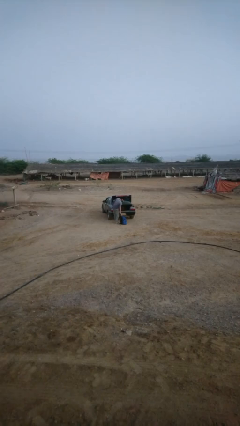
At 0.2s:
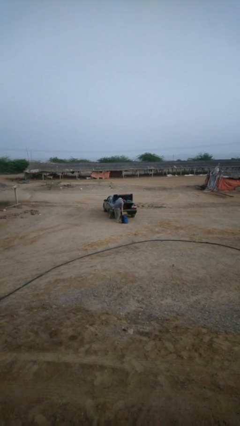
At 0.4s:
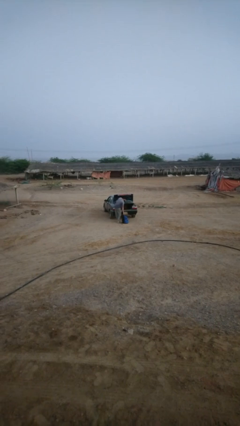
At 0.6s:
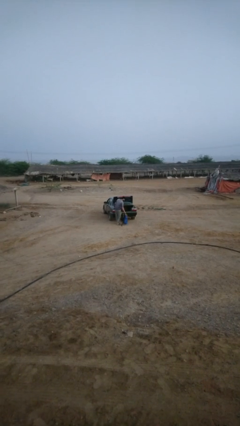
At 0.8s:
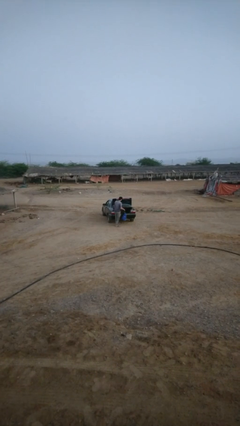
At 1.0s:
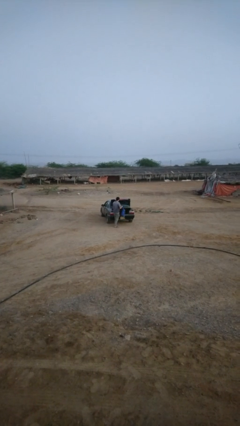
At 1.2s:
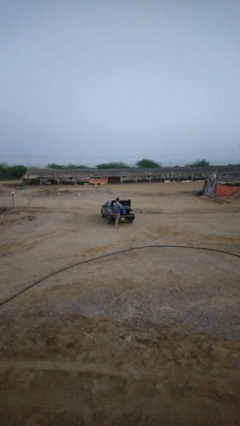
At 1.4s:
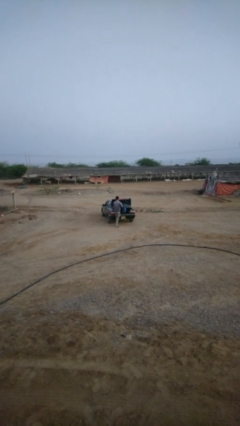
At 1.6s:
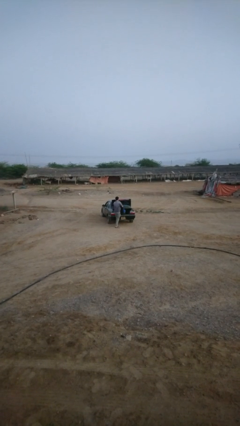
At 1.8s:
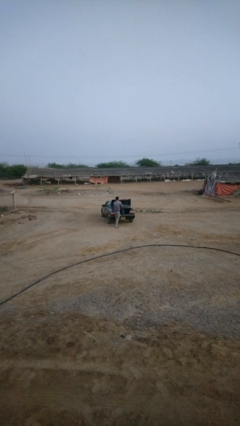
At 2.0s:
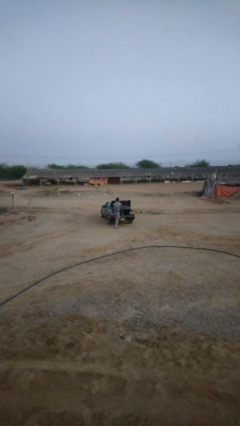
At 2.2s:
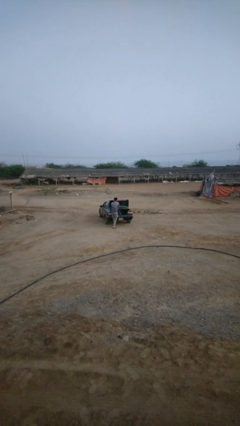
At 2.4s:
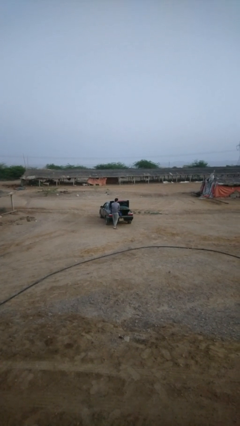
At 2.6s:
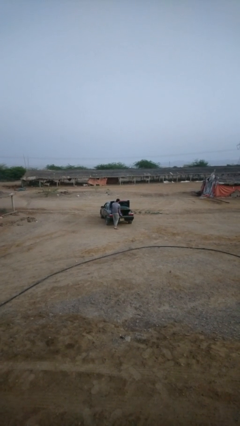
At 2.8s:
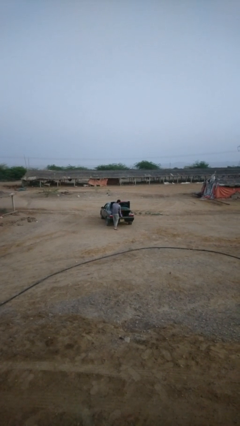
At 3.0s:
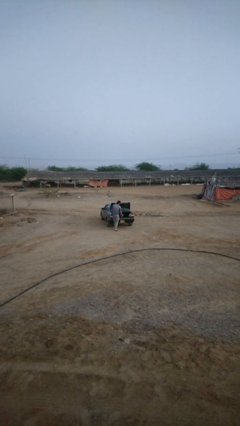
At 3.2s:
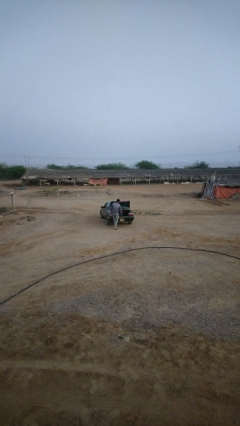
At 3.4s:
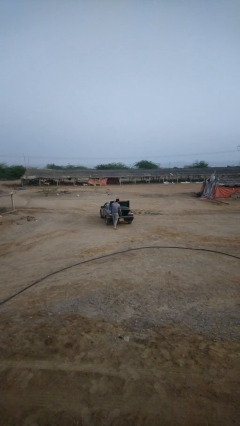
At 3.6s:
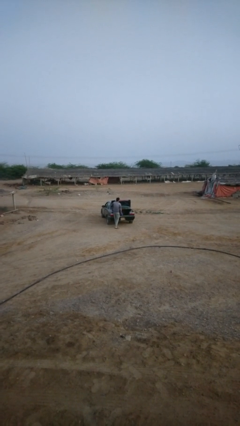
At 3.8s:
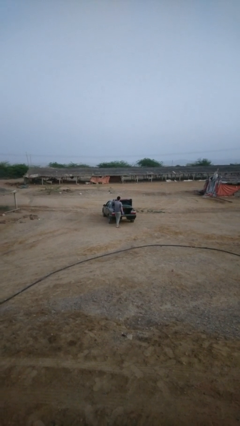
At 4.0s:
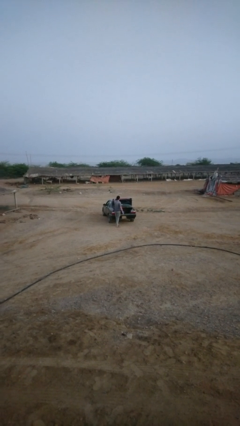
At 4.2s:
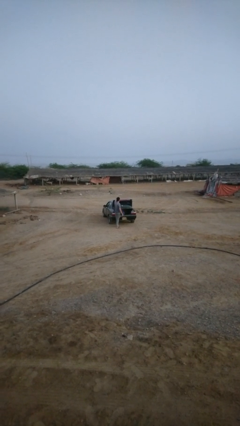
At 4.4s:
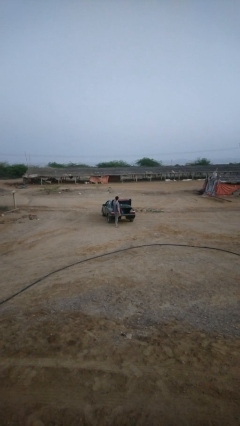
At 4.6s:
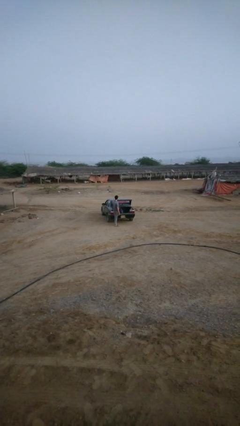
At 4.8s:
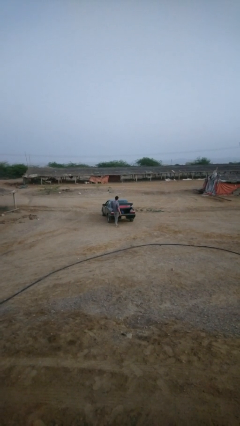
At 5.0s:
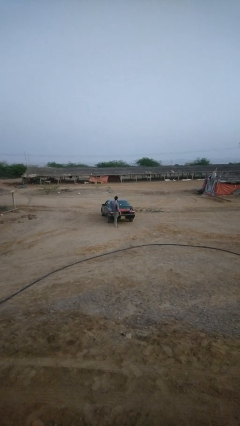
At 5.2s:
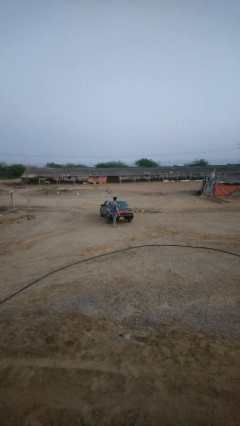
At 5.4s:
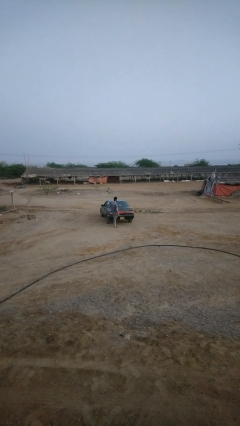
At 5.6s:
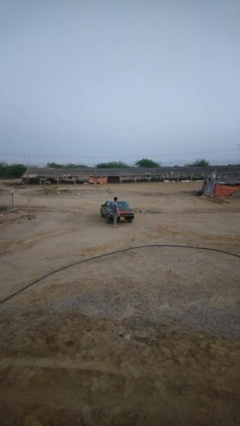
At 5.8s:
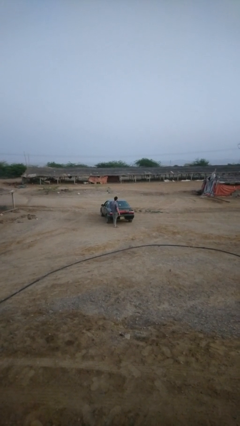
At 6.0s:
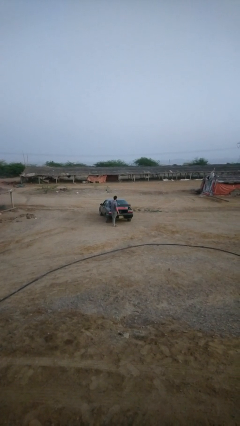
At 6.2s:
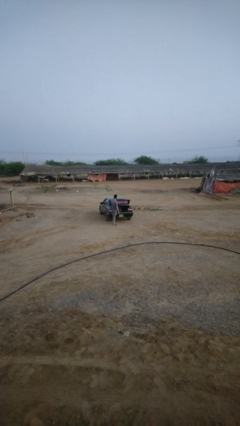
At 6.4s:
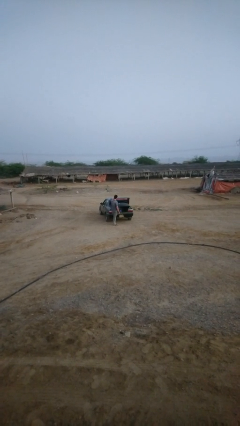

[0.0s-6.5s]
person loads car

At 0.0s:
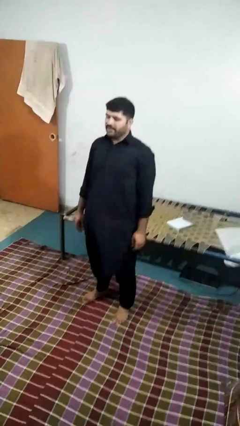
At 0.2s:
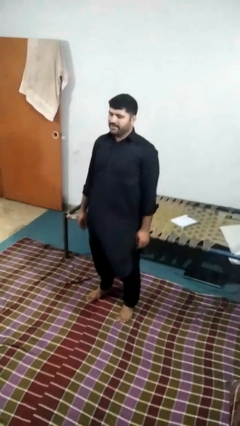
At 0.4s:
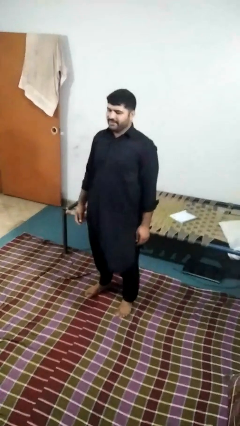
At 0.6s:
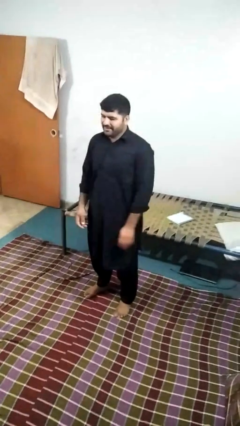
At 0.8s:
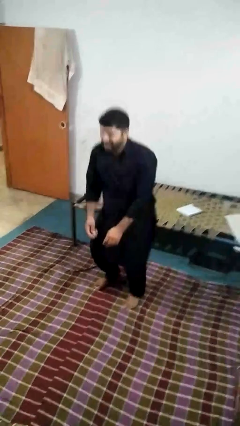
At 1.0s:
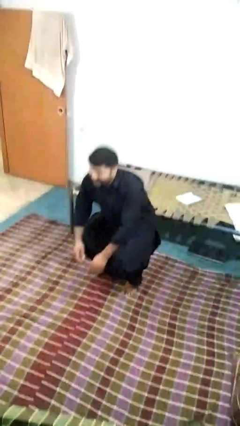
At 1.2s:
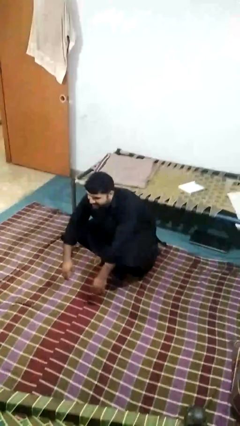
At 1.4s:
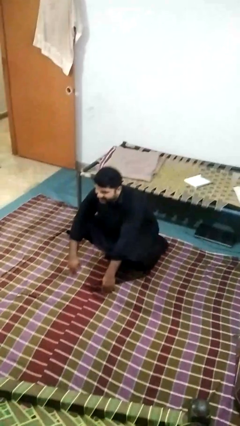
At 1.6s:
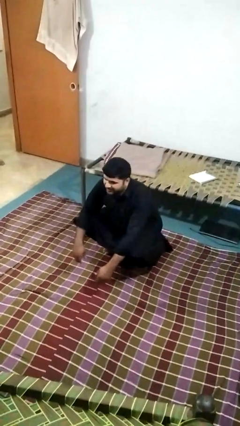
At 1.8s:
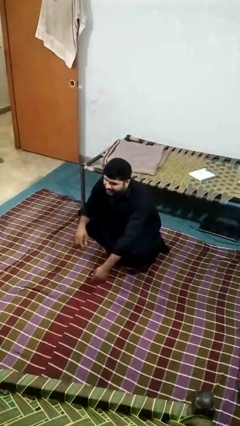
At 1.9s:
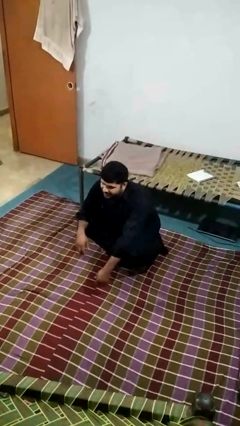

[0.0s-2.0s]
person squats

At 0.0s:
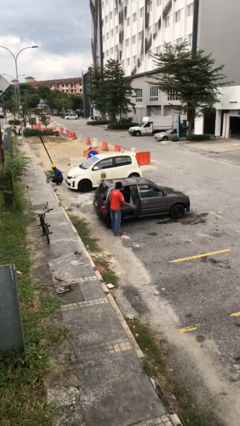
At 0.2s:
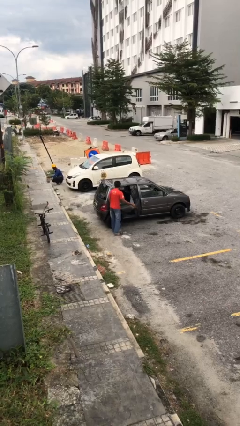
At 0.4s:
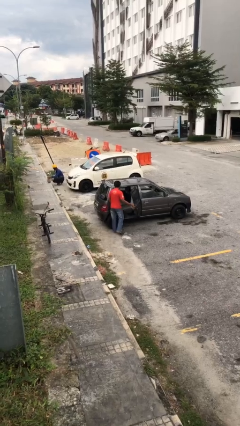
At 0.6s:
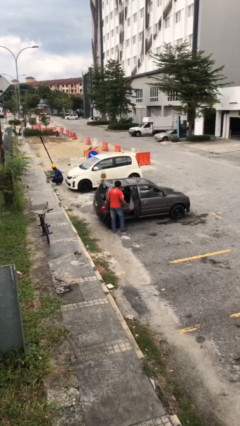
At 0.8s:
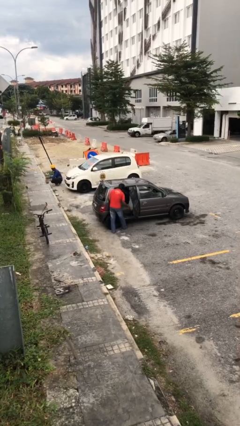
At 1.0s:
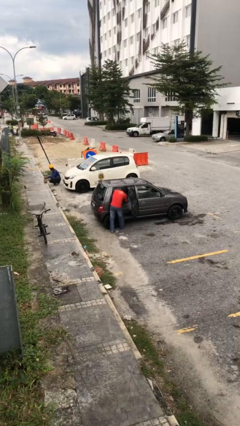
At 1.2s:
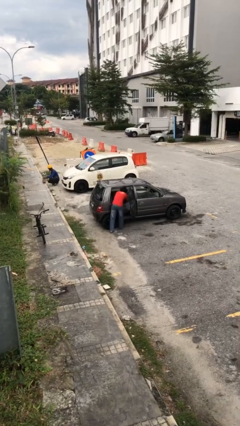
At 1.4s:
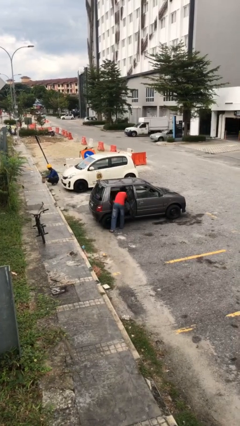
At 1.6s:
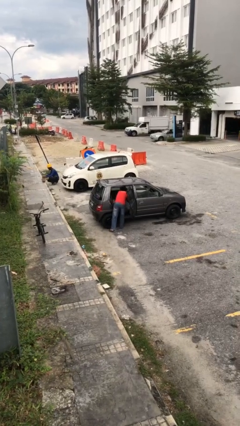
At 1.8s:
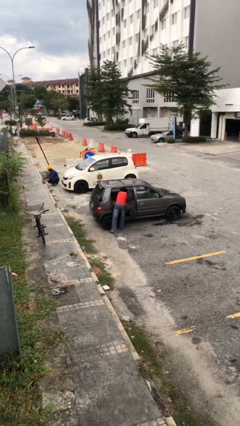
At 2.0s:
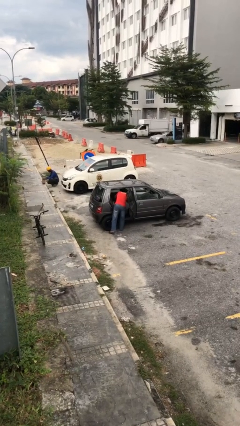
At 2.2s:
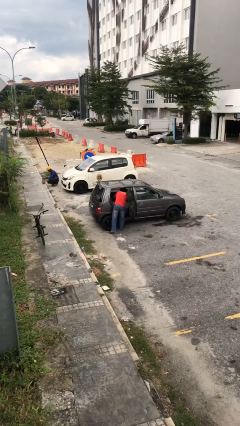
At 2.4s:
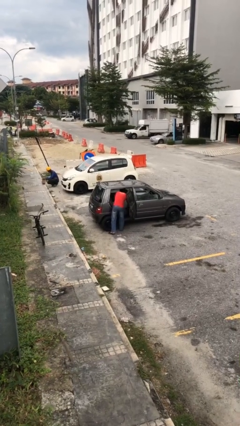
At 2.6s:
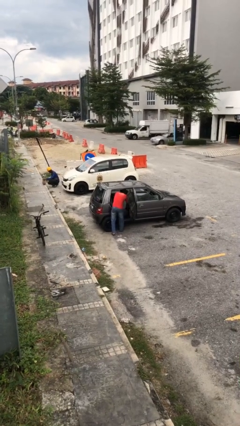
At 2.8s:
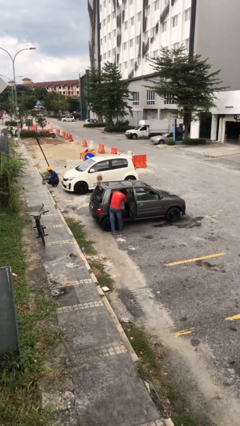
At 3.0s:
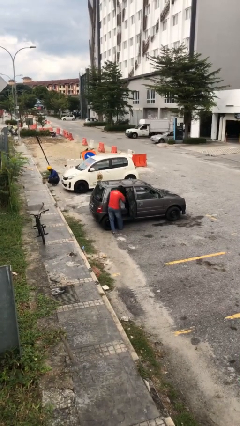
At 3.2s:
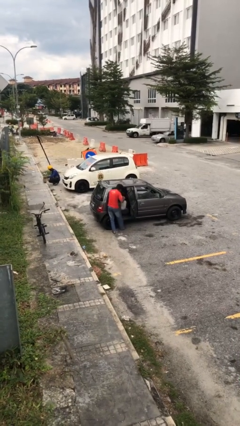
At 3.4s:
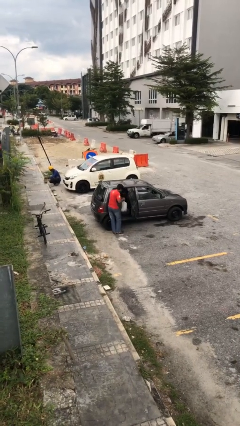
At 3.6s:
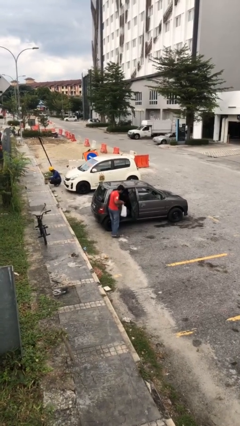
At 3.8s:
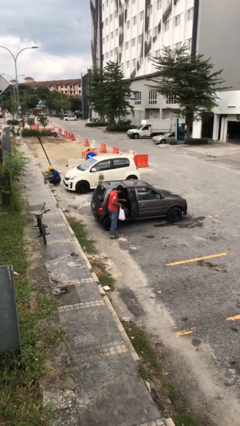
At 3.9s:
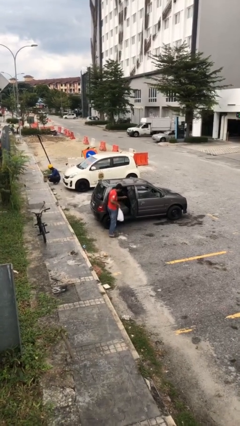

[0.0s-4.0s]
person unloads car

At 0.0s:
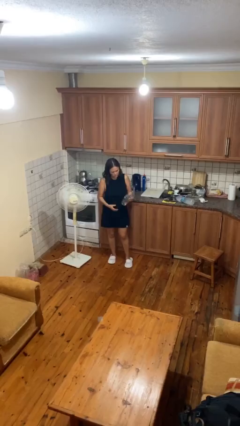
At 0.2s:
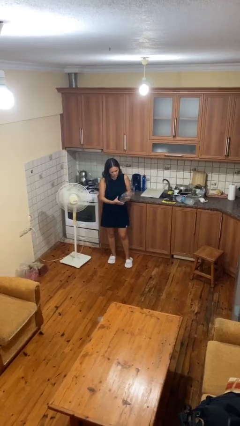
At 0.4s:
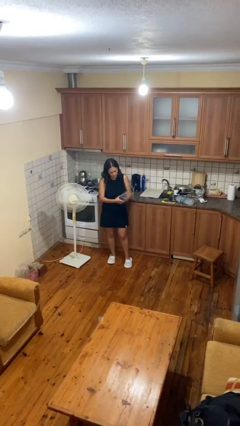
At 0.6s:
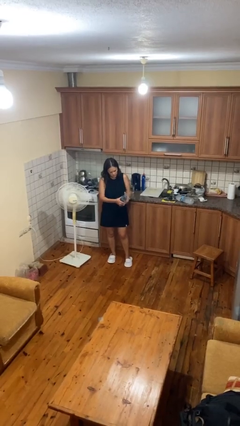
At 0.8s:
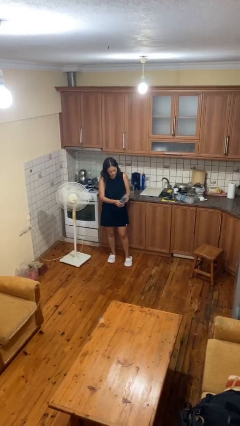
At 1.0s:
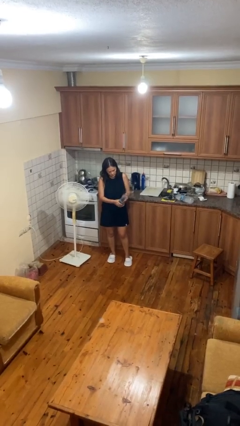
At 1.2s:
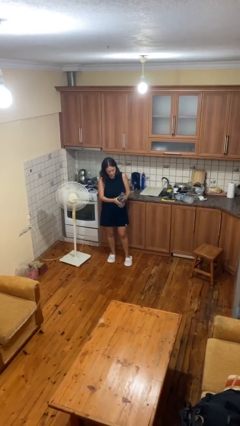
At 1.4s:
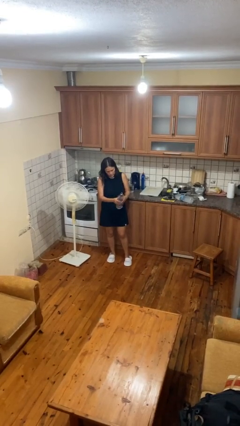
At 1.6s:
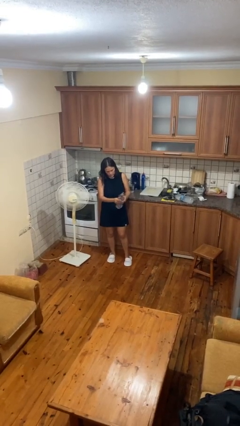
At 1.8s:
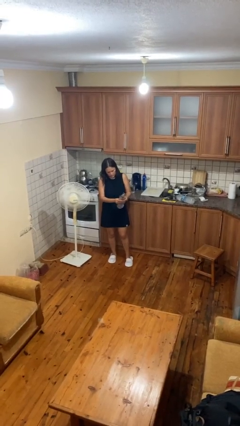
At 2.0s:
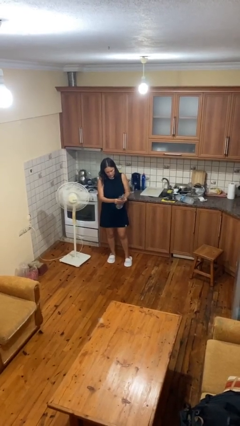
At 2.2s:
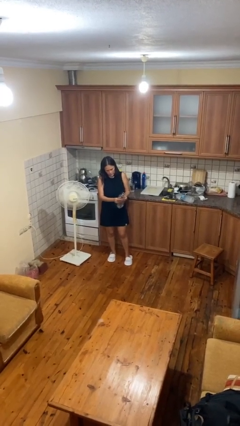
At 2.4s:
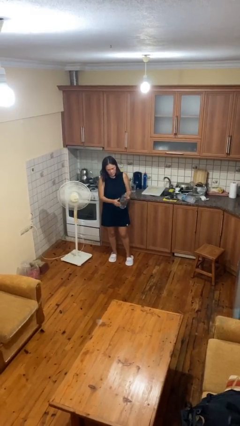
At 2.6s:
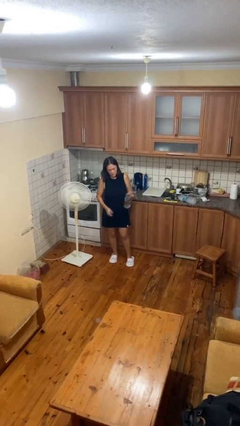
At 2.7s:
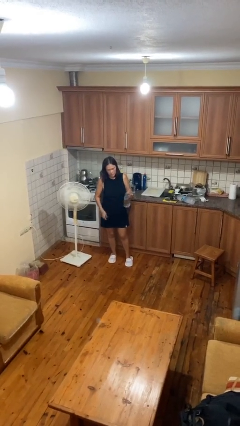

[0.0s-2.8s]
person squeezes object

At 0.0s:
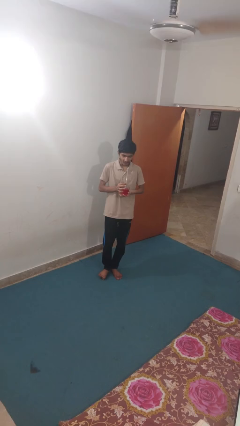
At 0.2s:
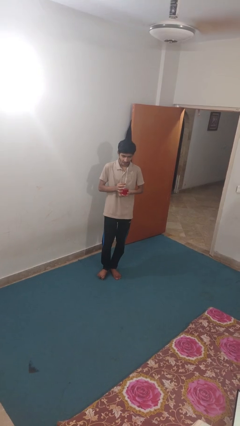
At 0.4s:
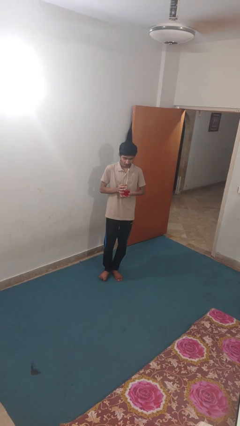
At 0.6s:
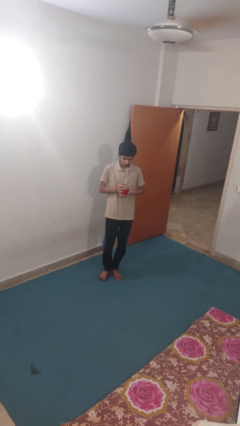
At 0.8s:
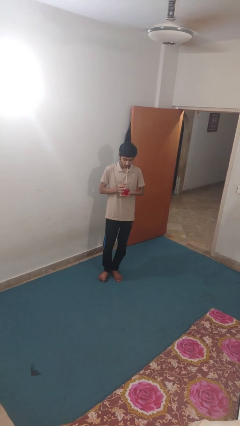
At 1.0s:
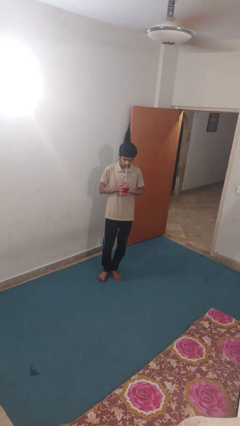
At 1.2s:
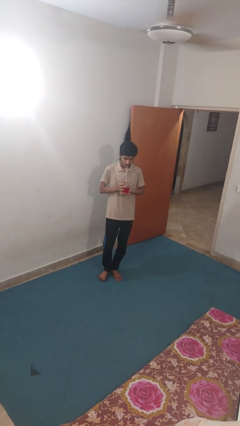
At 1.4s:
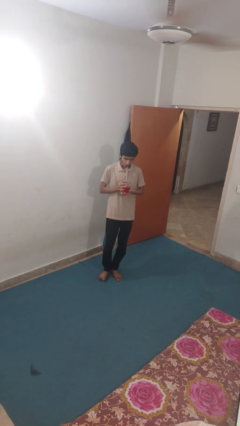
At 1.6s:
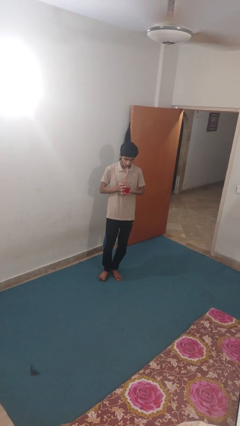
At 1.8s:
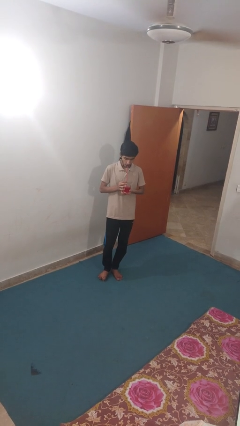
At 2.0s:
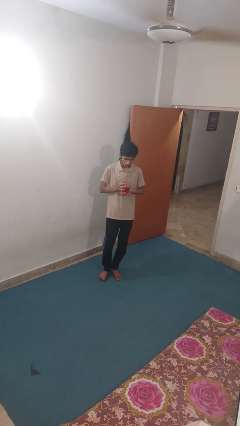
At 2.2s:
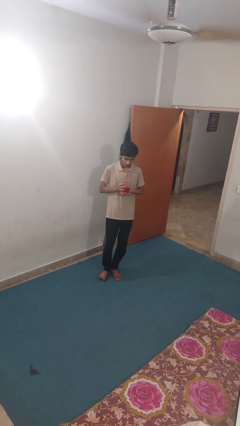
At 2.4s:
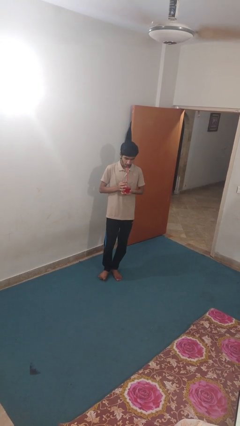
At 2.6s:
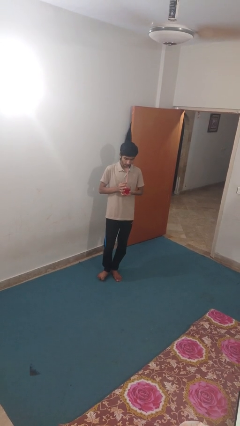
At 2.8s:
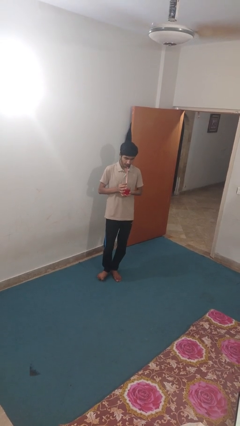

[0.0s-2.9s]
person drinks from straw
